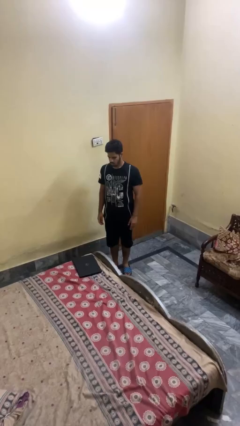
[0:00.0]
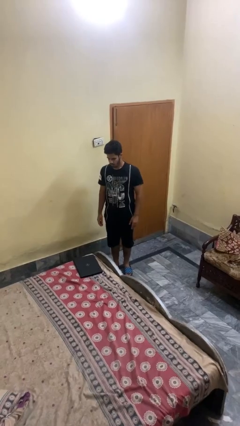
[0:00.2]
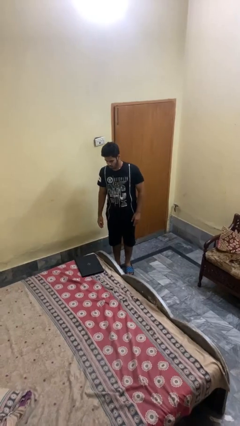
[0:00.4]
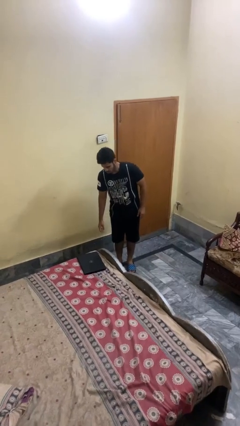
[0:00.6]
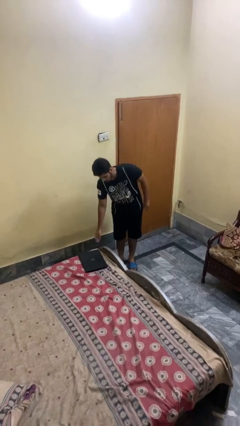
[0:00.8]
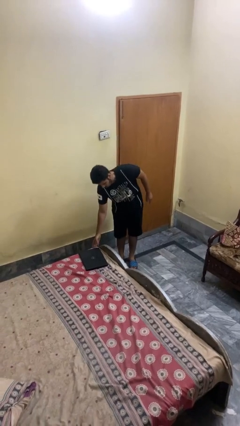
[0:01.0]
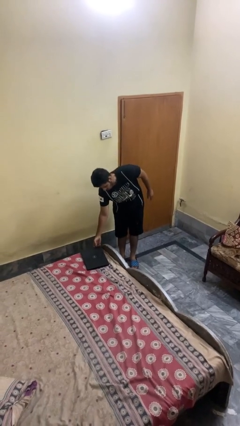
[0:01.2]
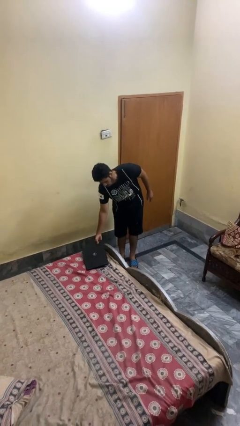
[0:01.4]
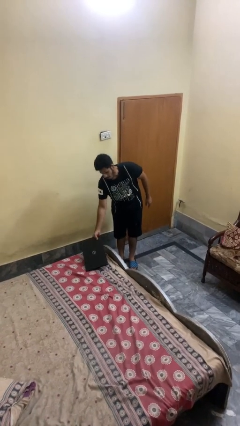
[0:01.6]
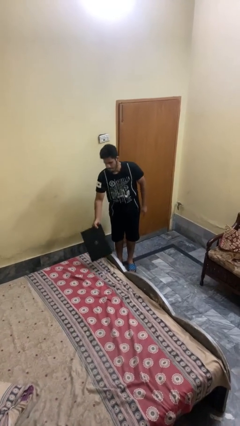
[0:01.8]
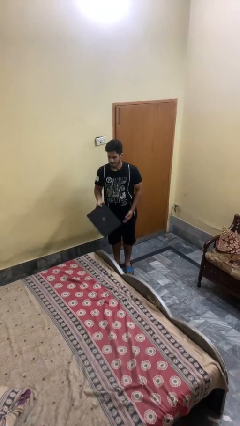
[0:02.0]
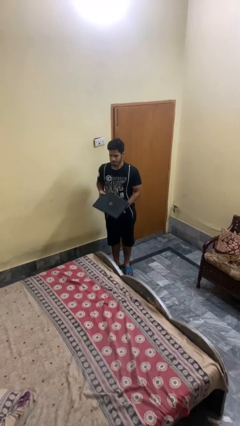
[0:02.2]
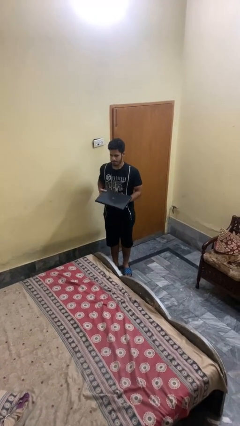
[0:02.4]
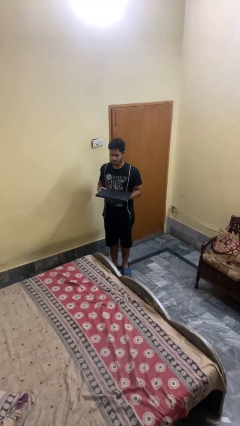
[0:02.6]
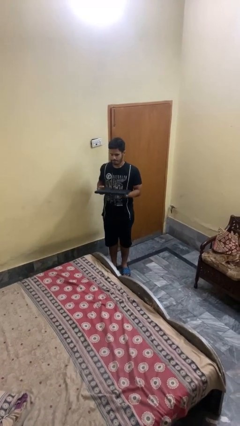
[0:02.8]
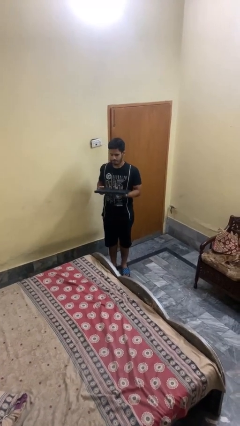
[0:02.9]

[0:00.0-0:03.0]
person picks up object from bed

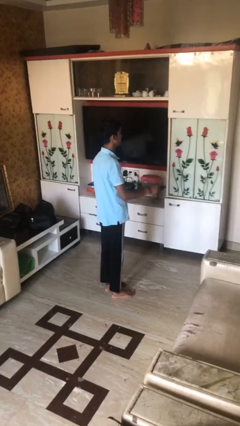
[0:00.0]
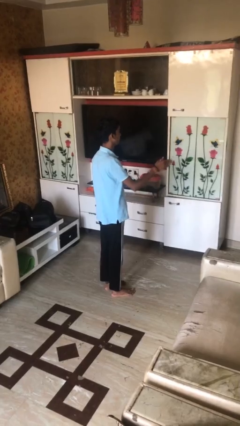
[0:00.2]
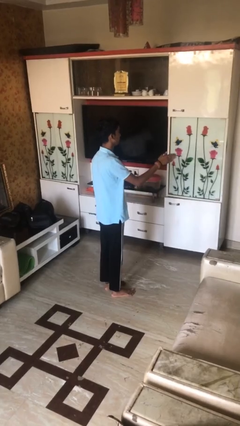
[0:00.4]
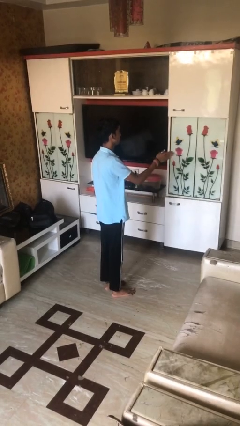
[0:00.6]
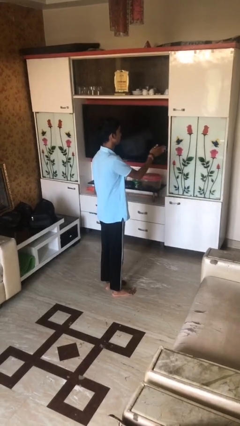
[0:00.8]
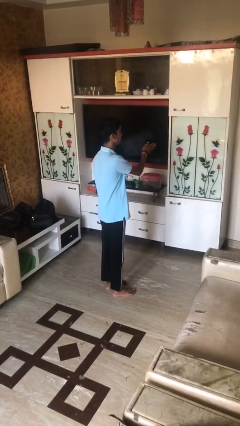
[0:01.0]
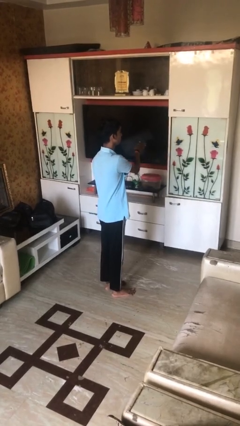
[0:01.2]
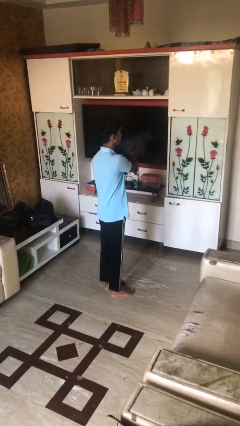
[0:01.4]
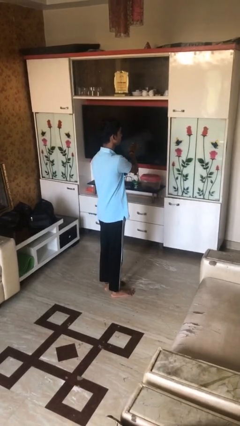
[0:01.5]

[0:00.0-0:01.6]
person gestures swipe left

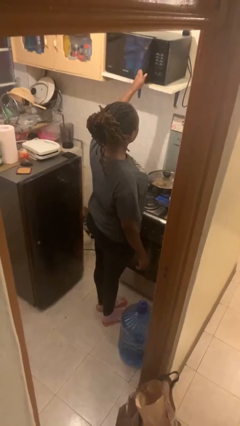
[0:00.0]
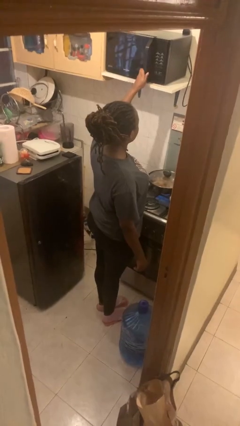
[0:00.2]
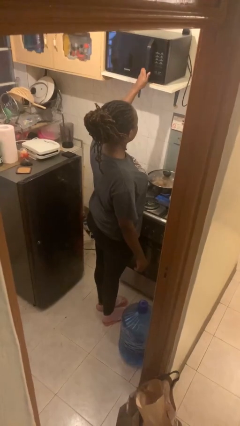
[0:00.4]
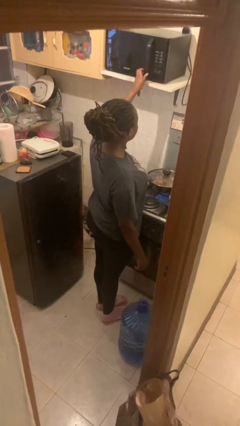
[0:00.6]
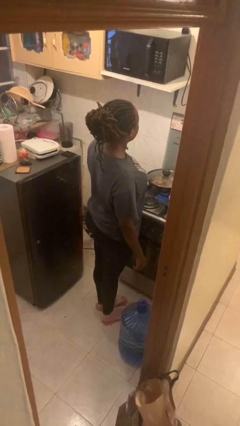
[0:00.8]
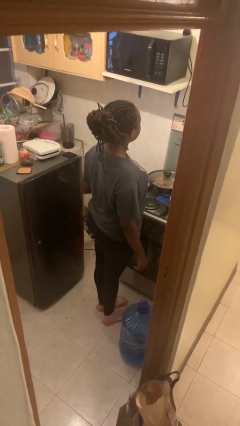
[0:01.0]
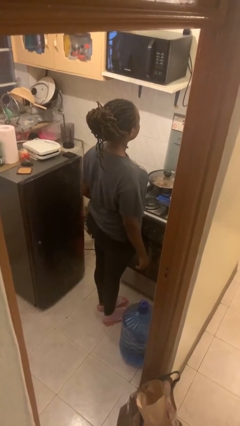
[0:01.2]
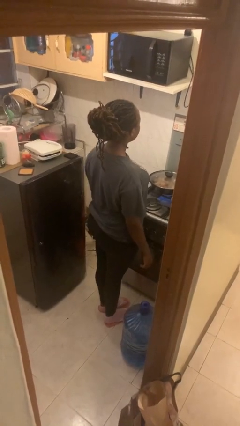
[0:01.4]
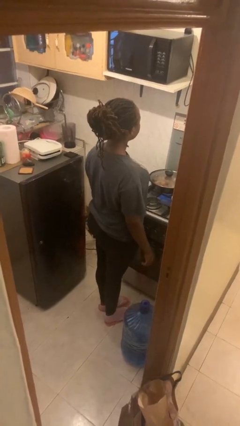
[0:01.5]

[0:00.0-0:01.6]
person closes microwave

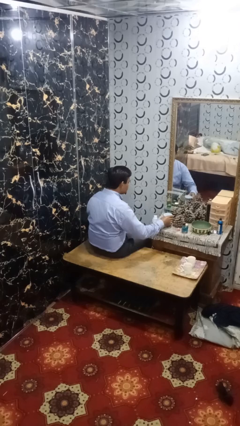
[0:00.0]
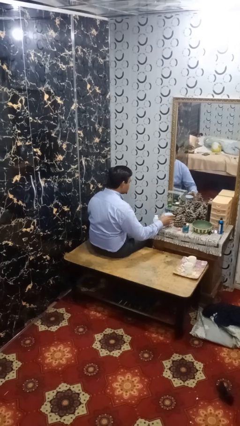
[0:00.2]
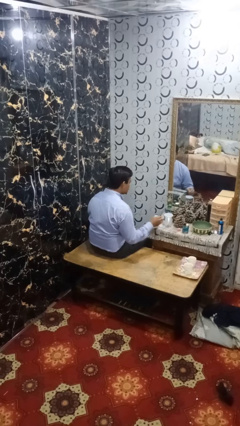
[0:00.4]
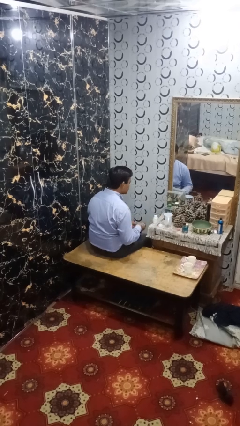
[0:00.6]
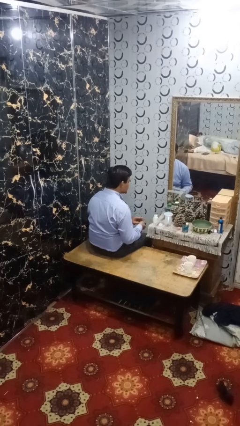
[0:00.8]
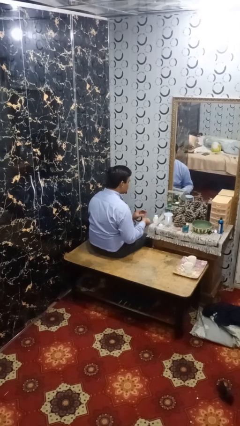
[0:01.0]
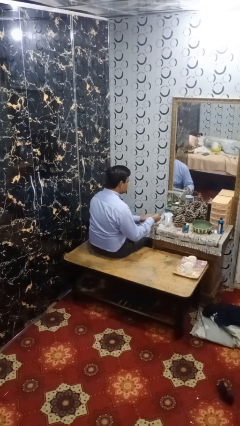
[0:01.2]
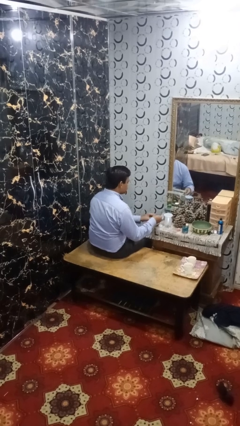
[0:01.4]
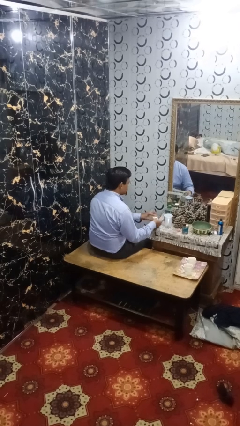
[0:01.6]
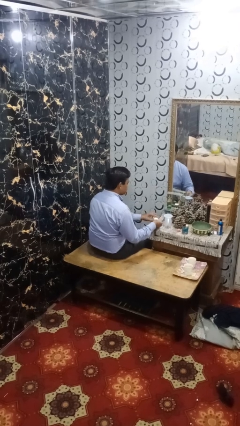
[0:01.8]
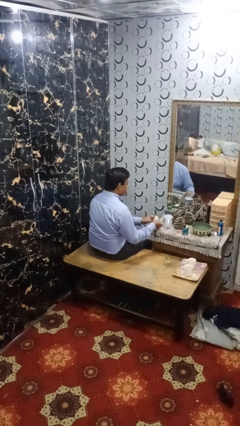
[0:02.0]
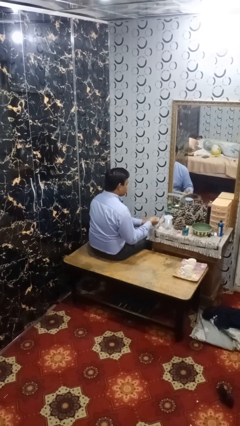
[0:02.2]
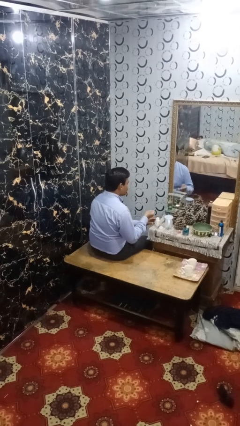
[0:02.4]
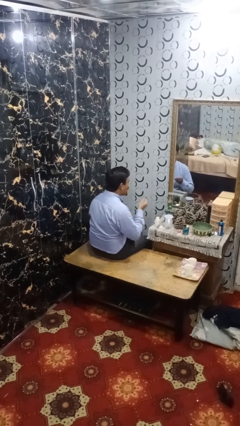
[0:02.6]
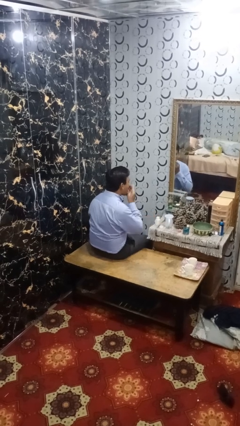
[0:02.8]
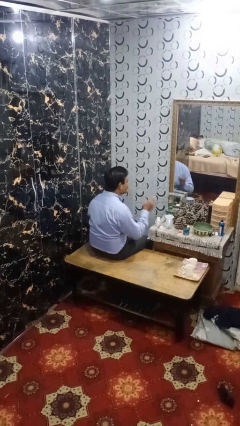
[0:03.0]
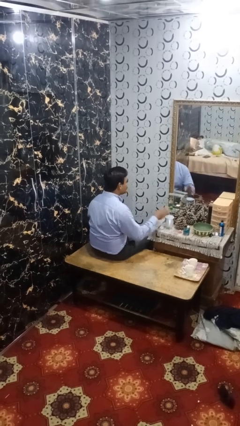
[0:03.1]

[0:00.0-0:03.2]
person takes medicine pills

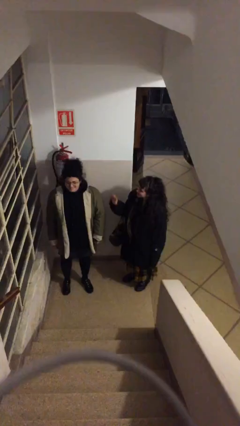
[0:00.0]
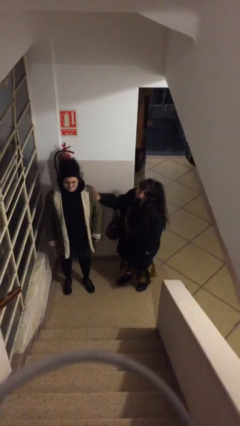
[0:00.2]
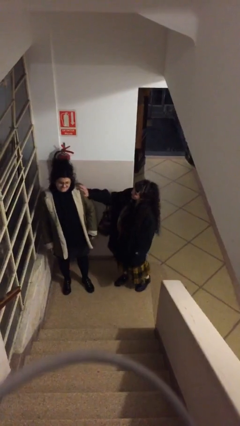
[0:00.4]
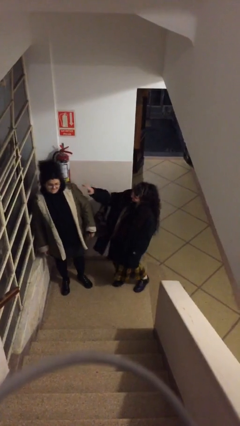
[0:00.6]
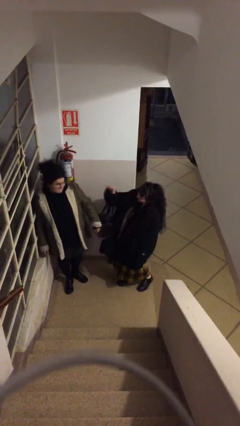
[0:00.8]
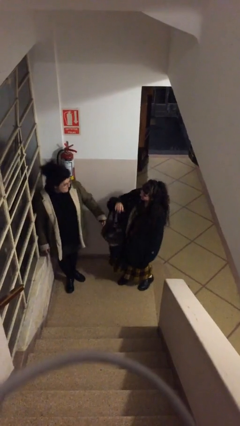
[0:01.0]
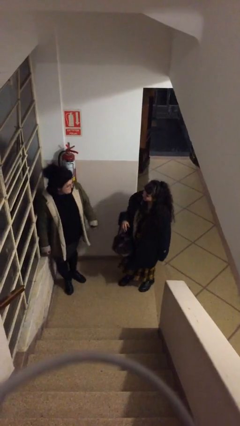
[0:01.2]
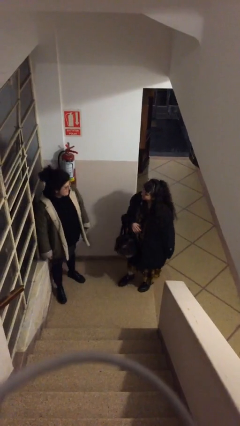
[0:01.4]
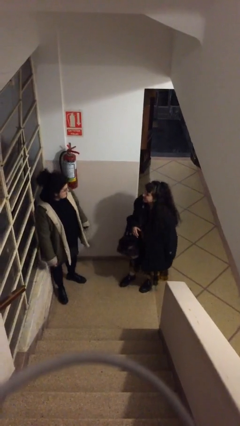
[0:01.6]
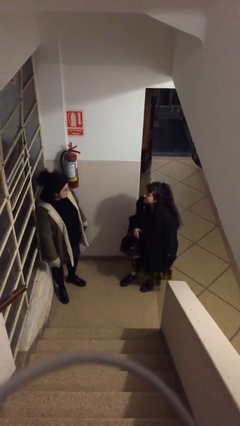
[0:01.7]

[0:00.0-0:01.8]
person shoves person

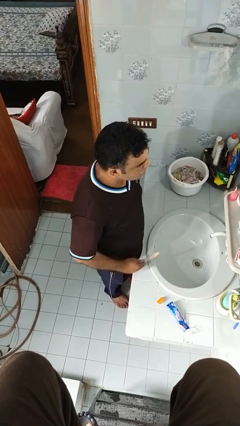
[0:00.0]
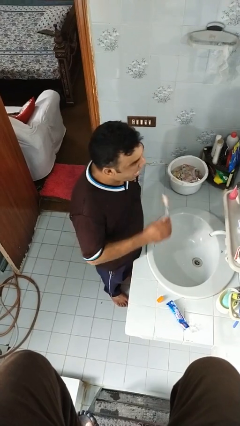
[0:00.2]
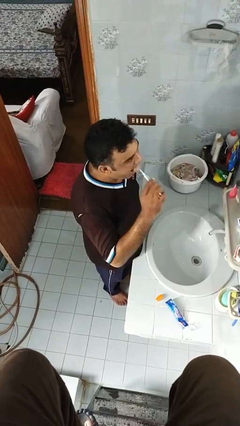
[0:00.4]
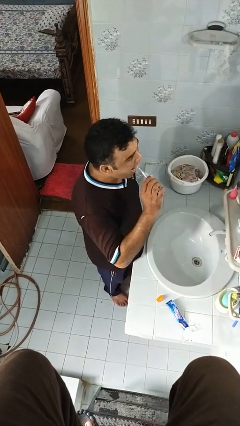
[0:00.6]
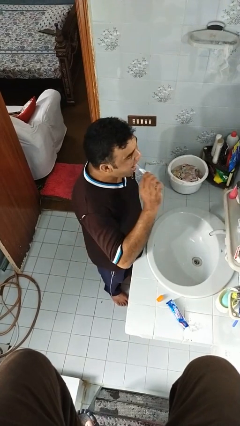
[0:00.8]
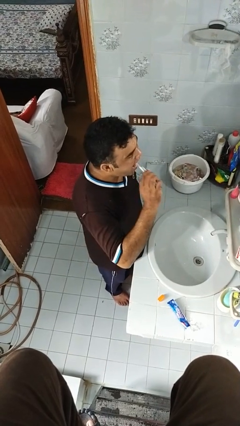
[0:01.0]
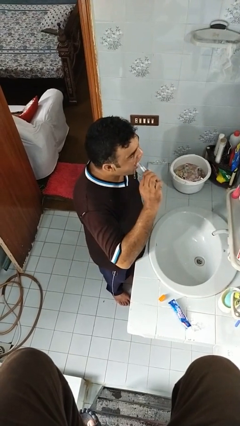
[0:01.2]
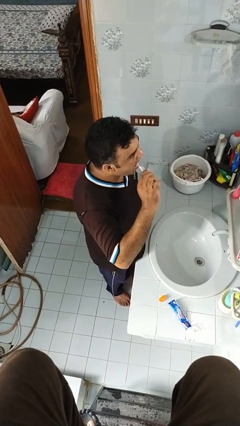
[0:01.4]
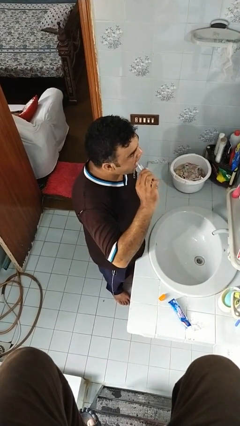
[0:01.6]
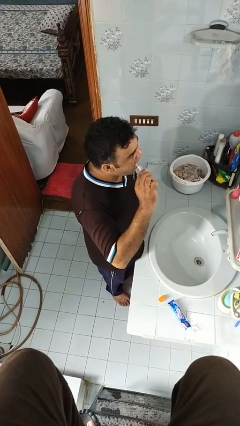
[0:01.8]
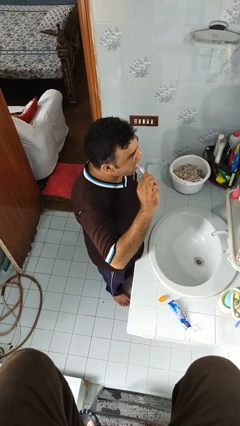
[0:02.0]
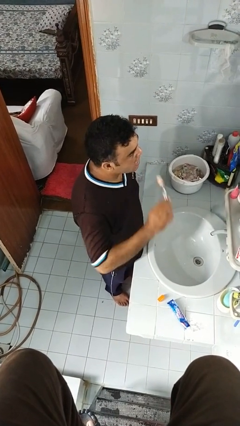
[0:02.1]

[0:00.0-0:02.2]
person brushes teeth

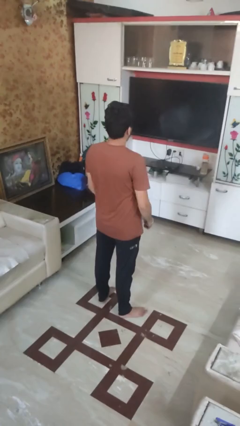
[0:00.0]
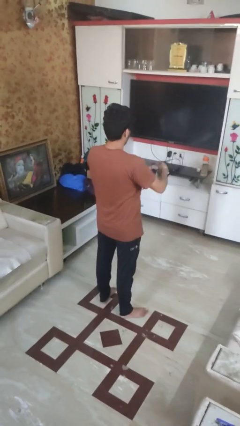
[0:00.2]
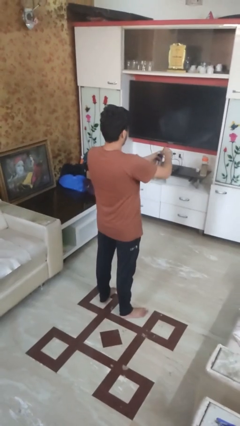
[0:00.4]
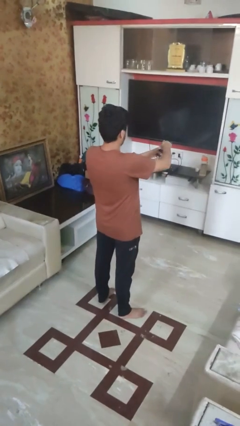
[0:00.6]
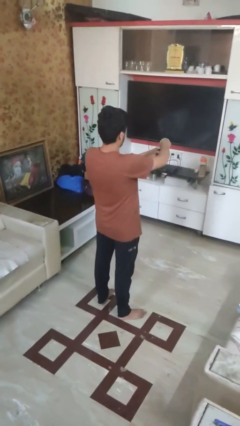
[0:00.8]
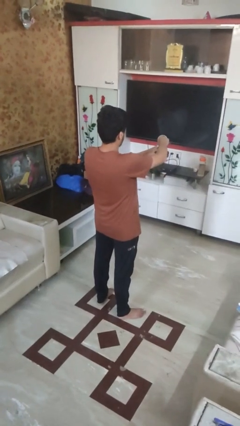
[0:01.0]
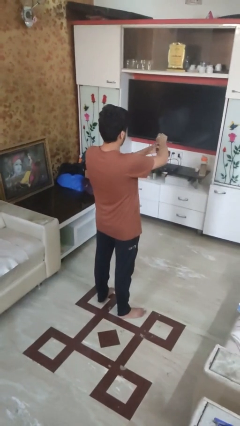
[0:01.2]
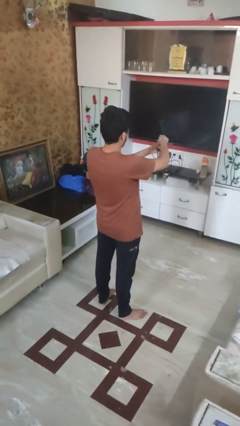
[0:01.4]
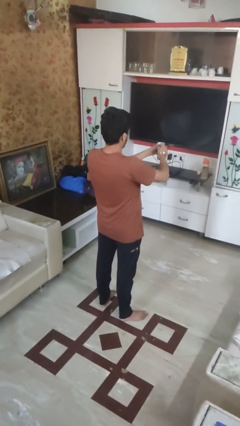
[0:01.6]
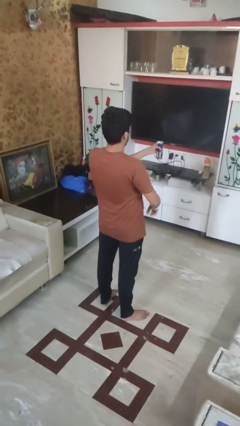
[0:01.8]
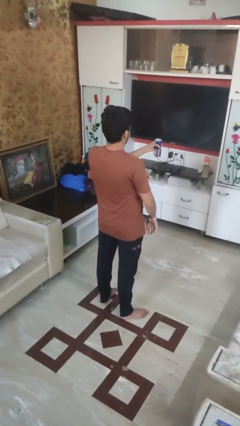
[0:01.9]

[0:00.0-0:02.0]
person opens beverage can

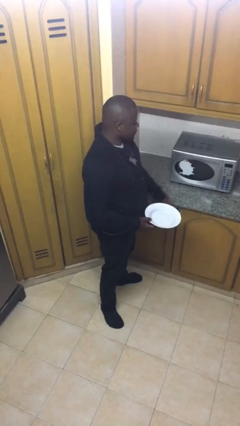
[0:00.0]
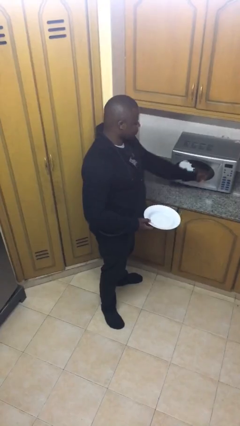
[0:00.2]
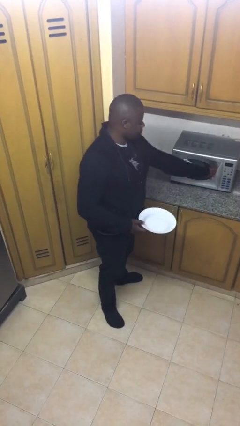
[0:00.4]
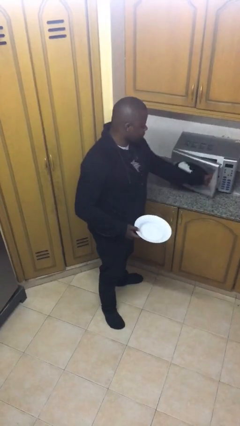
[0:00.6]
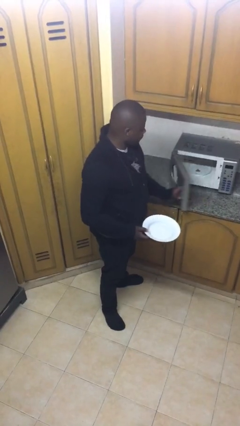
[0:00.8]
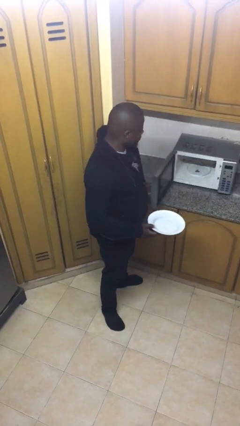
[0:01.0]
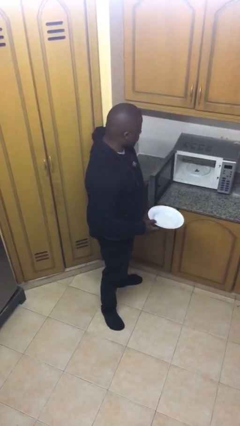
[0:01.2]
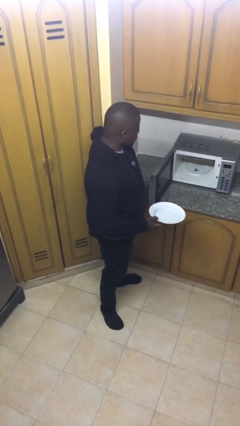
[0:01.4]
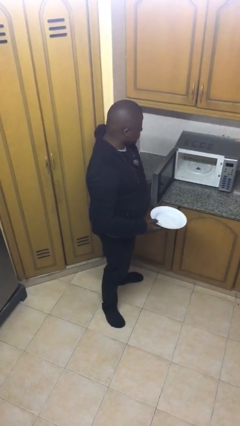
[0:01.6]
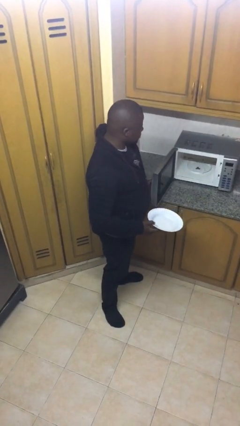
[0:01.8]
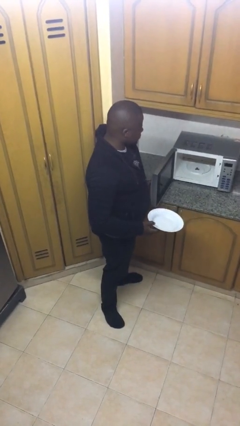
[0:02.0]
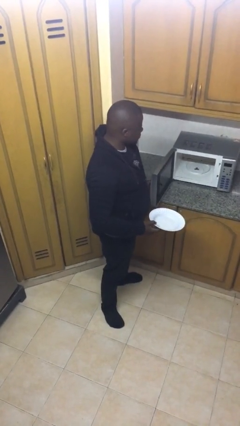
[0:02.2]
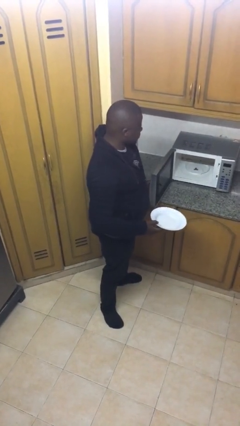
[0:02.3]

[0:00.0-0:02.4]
person opens microwave
